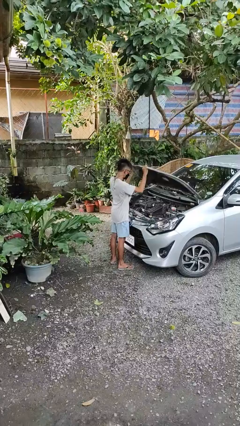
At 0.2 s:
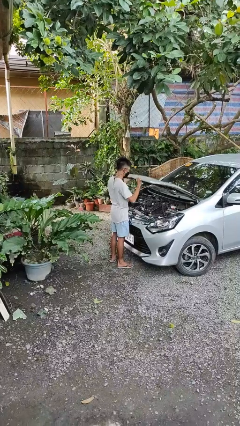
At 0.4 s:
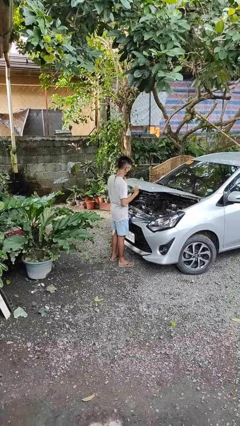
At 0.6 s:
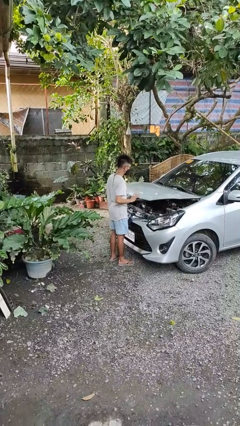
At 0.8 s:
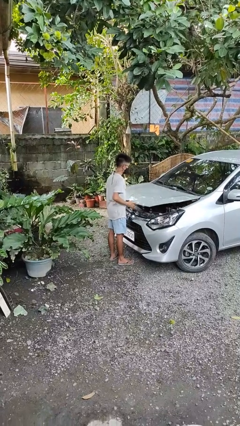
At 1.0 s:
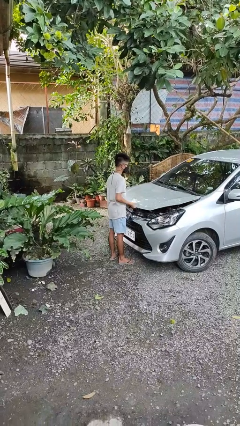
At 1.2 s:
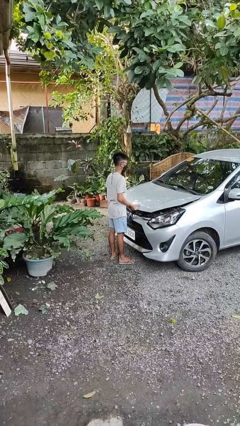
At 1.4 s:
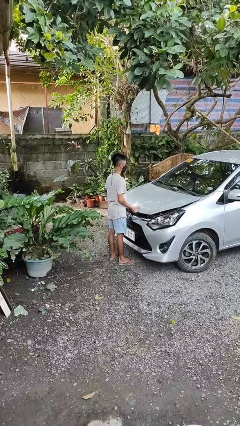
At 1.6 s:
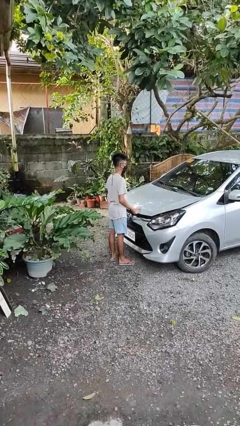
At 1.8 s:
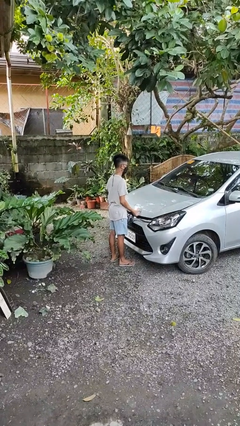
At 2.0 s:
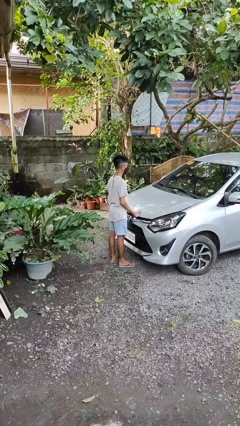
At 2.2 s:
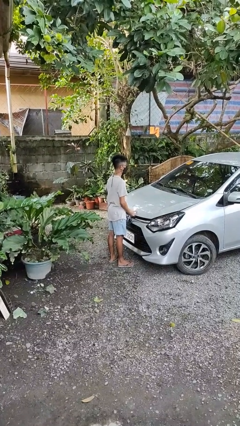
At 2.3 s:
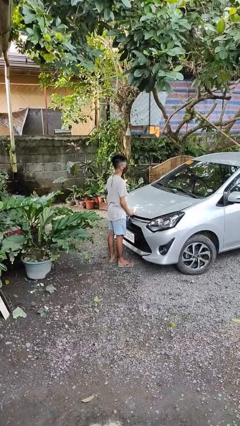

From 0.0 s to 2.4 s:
person closes car hood

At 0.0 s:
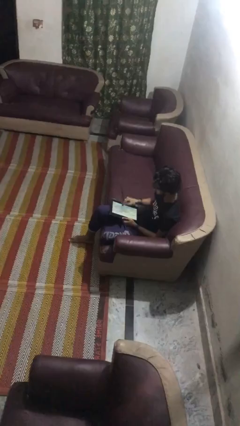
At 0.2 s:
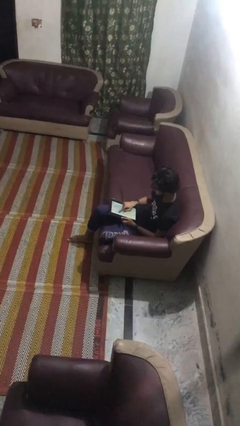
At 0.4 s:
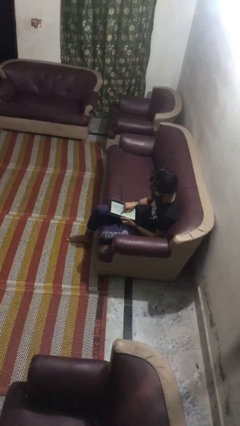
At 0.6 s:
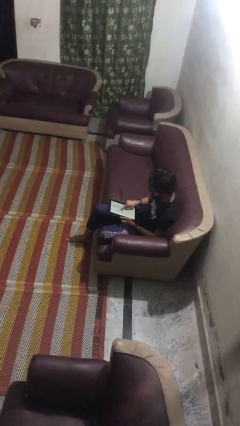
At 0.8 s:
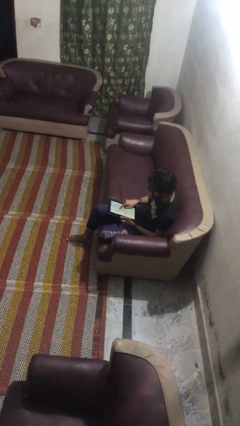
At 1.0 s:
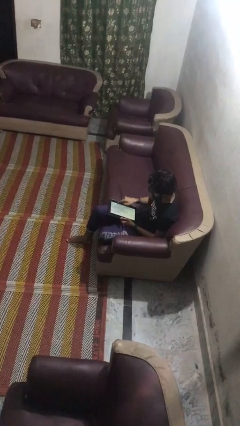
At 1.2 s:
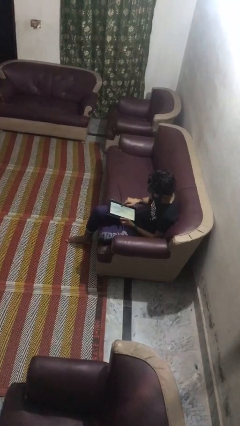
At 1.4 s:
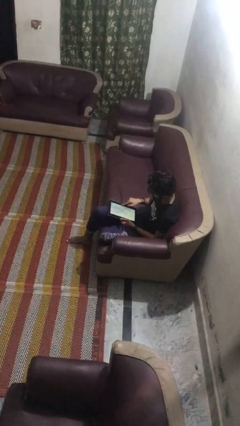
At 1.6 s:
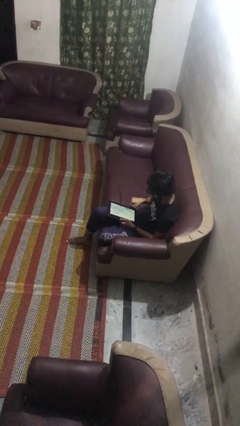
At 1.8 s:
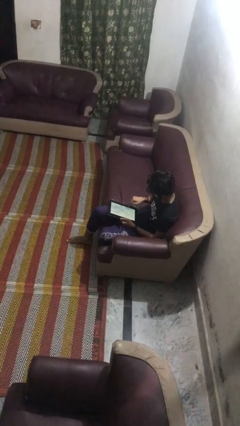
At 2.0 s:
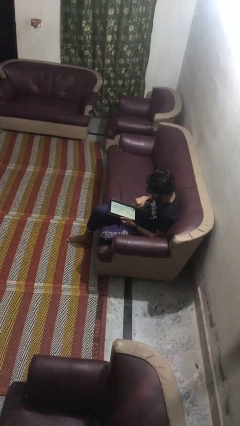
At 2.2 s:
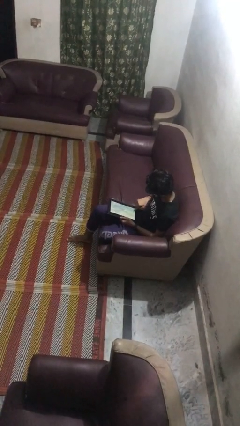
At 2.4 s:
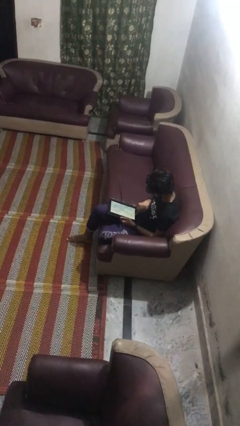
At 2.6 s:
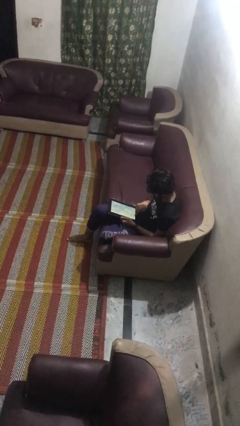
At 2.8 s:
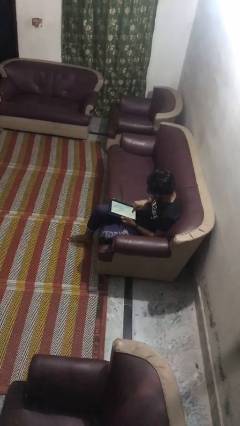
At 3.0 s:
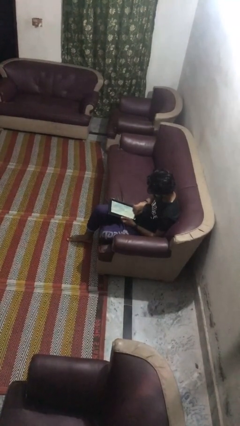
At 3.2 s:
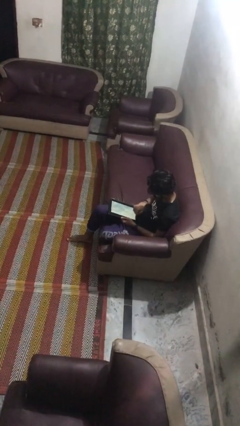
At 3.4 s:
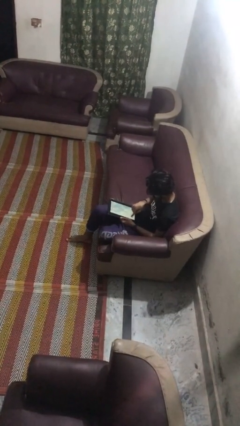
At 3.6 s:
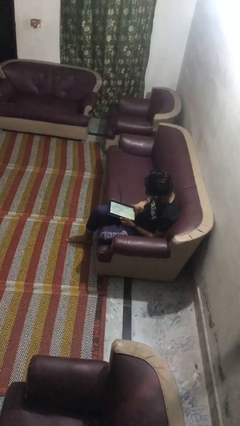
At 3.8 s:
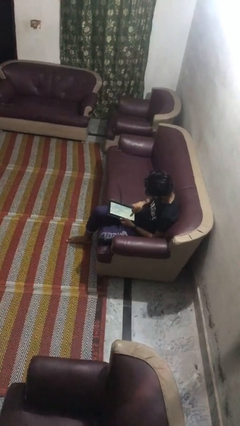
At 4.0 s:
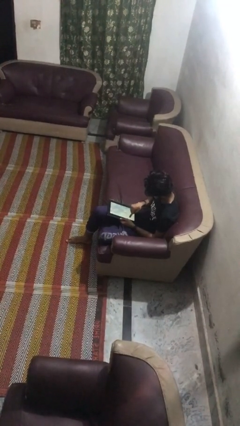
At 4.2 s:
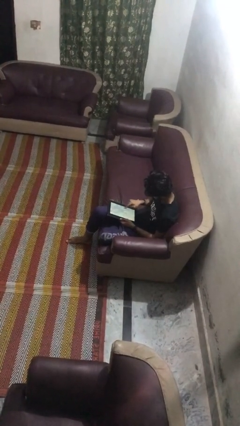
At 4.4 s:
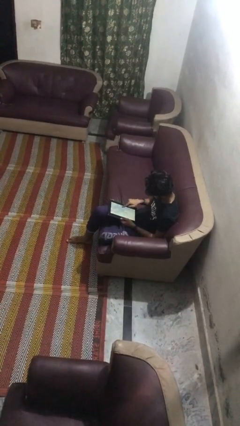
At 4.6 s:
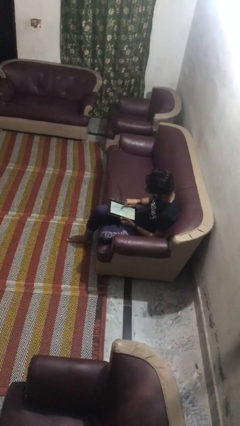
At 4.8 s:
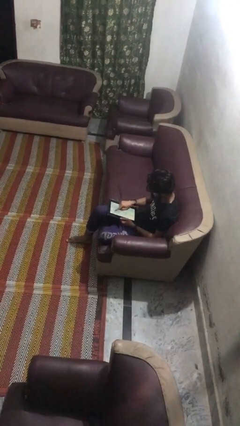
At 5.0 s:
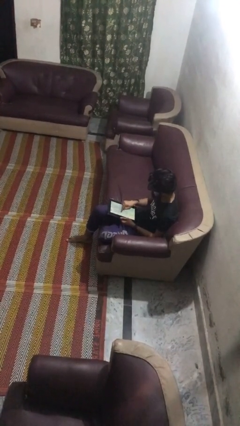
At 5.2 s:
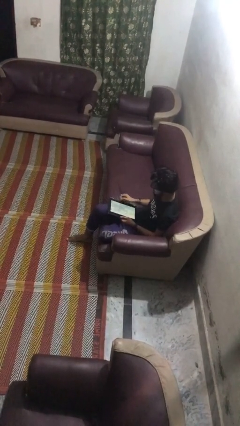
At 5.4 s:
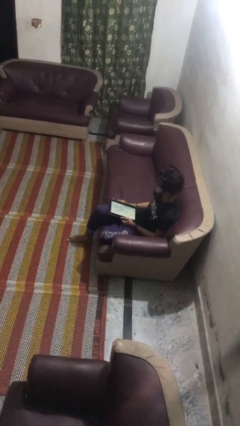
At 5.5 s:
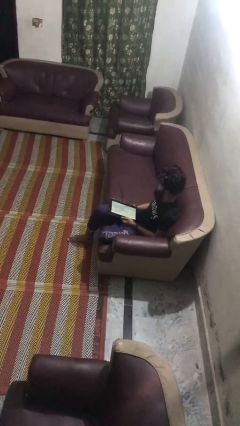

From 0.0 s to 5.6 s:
person interacts with tablet

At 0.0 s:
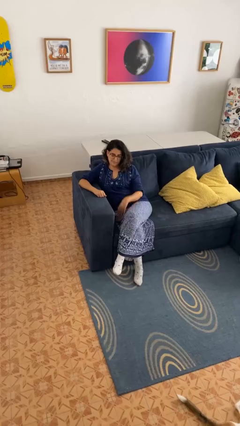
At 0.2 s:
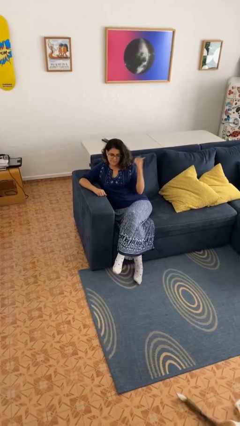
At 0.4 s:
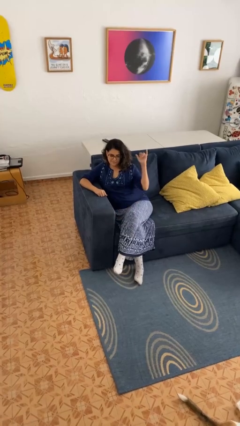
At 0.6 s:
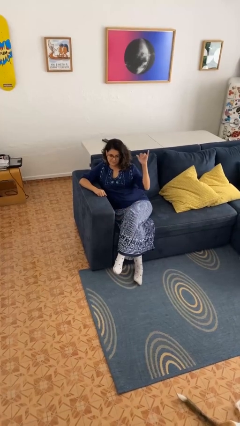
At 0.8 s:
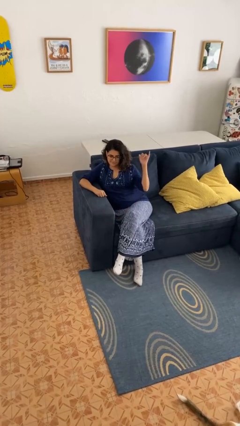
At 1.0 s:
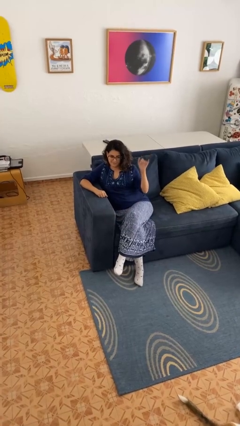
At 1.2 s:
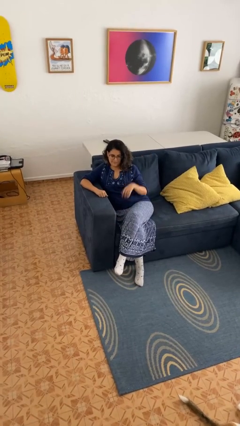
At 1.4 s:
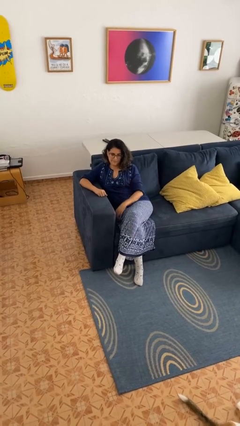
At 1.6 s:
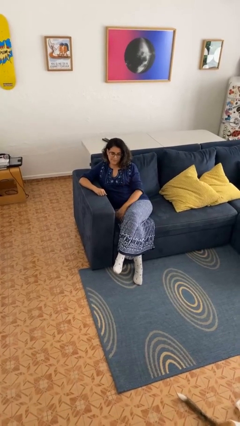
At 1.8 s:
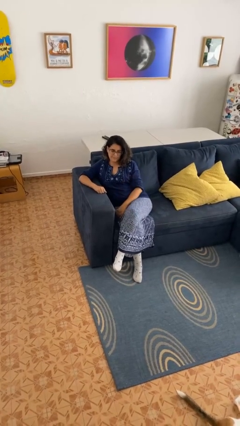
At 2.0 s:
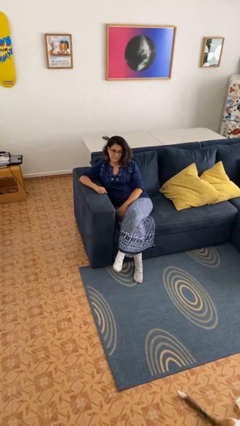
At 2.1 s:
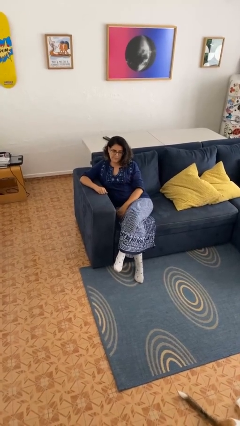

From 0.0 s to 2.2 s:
person gestures hang loose

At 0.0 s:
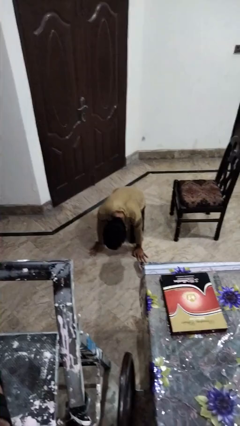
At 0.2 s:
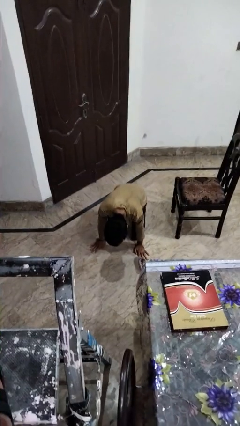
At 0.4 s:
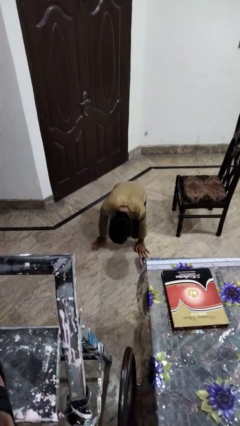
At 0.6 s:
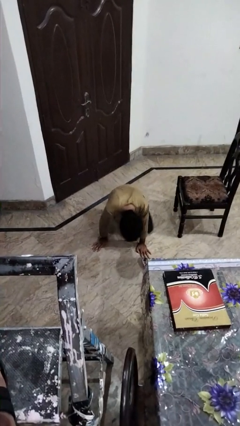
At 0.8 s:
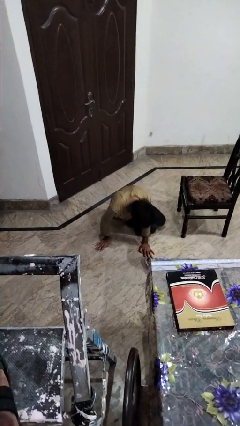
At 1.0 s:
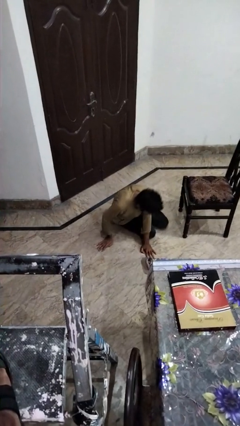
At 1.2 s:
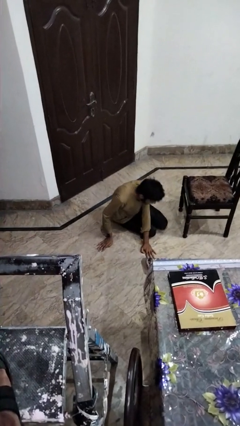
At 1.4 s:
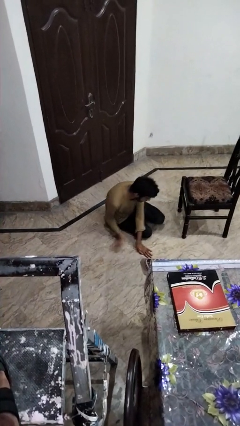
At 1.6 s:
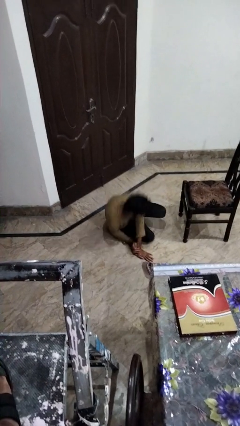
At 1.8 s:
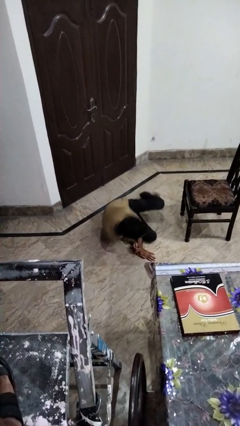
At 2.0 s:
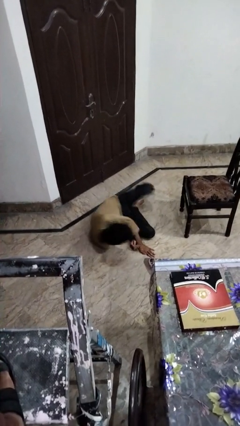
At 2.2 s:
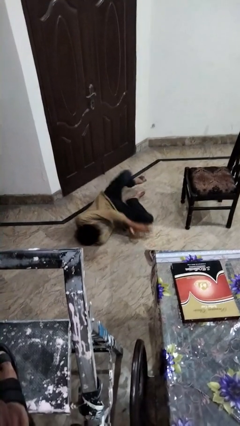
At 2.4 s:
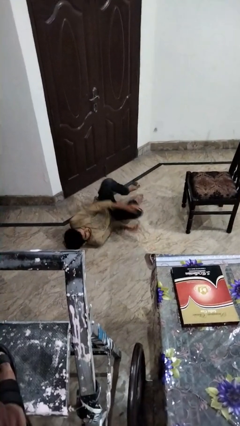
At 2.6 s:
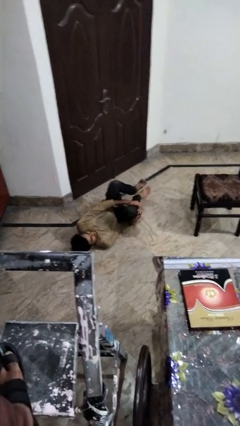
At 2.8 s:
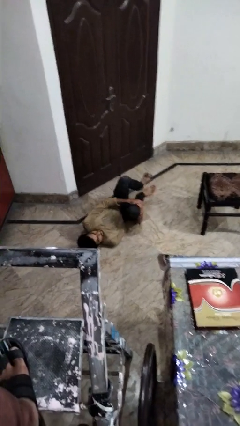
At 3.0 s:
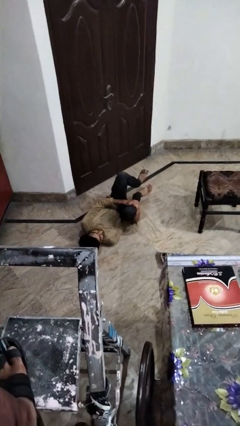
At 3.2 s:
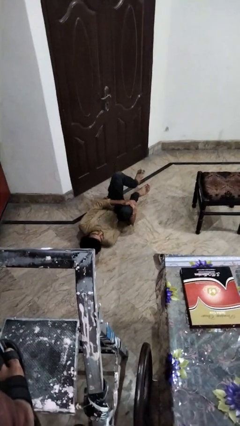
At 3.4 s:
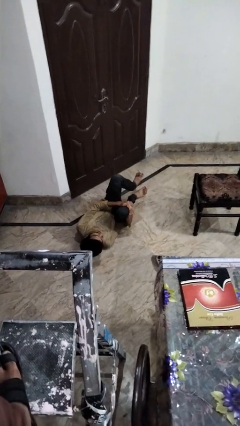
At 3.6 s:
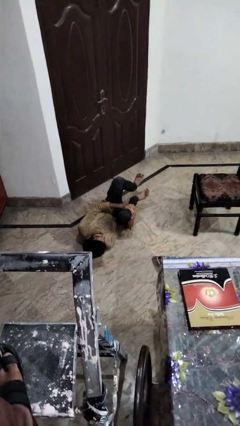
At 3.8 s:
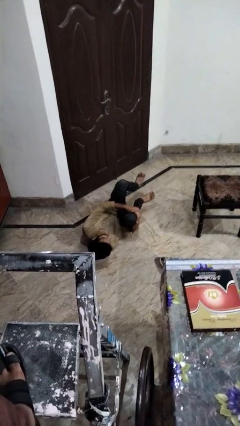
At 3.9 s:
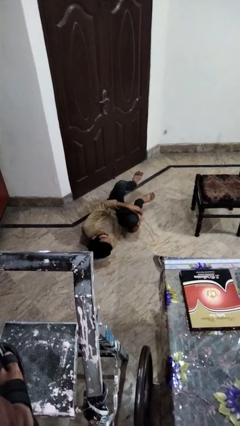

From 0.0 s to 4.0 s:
person lies down on floor

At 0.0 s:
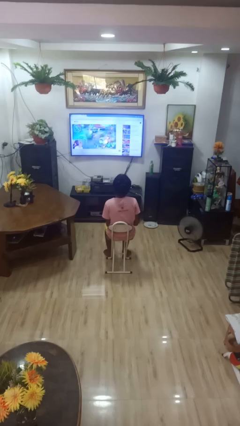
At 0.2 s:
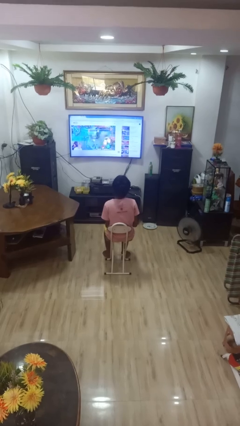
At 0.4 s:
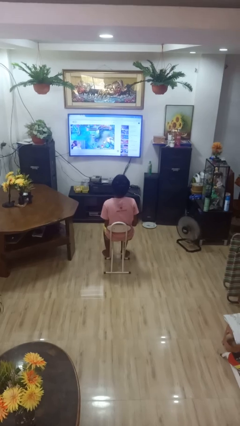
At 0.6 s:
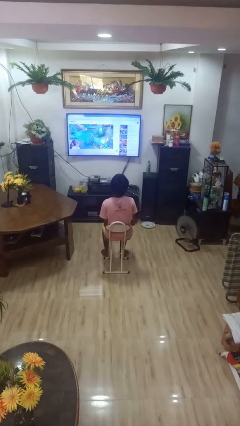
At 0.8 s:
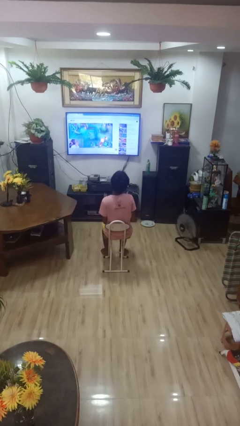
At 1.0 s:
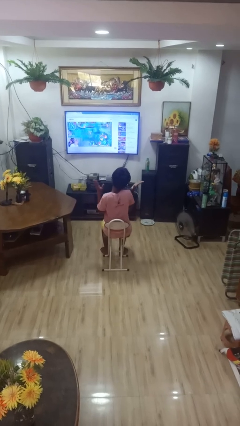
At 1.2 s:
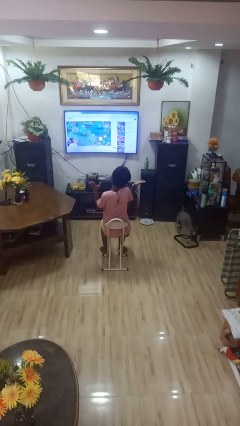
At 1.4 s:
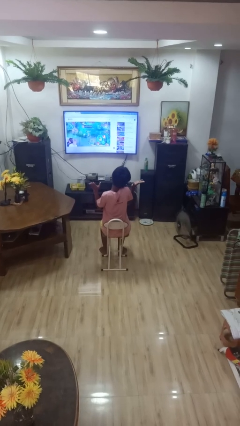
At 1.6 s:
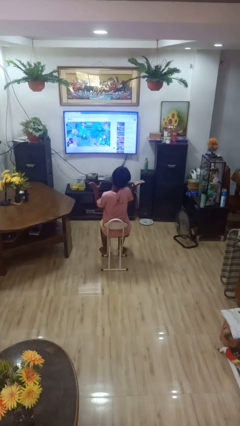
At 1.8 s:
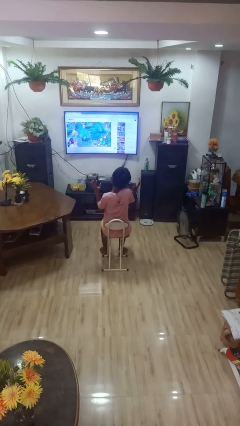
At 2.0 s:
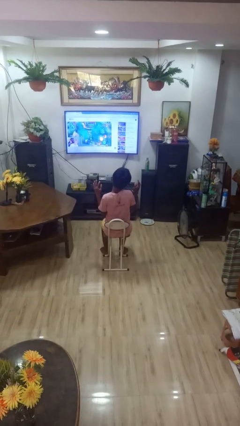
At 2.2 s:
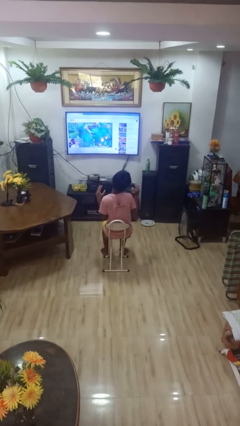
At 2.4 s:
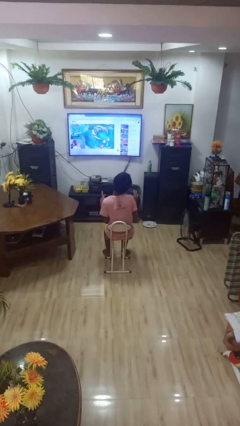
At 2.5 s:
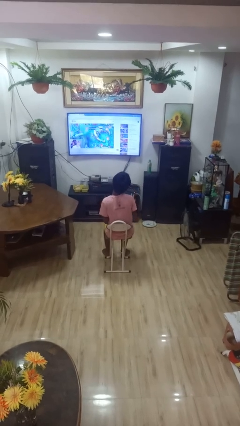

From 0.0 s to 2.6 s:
person shrugs

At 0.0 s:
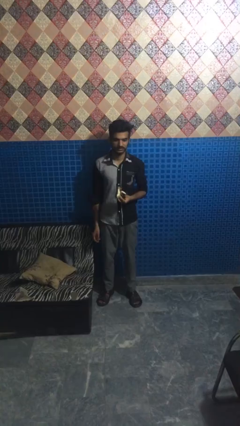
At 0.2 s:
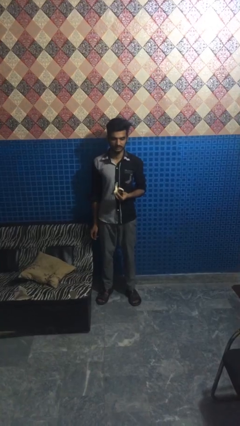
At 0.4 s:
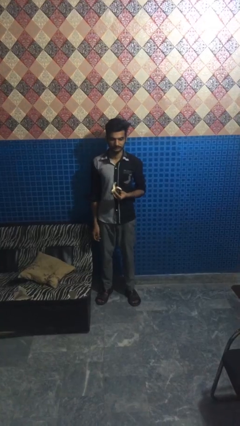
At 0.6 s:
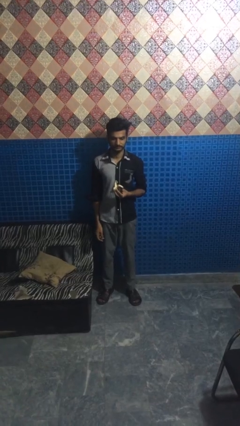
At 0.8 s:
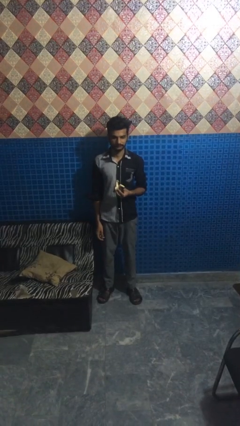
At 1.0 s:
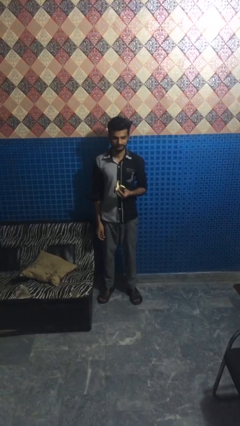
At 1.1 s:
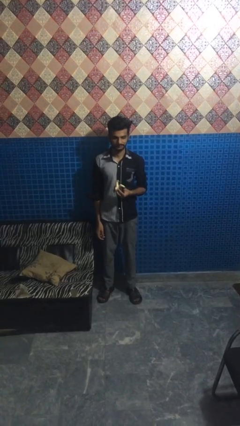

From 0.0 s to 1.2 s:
person eats banana
